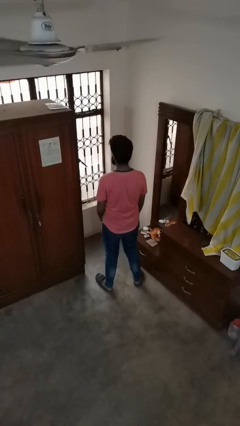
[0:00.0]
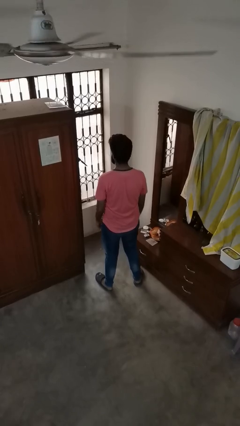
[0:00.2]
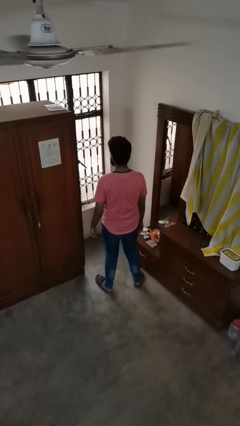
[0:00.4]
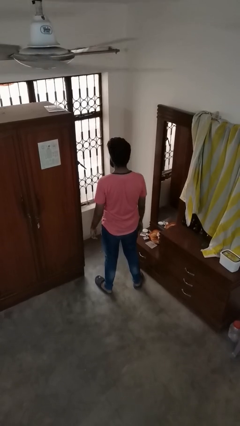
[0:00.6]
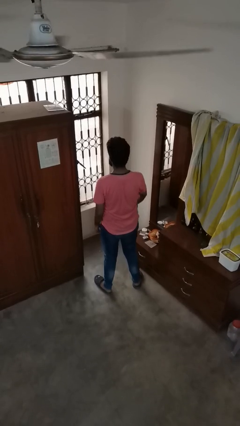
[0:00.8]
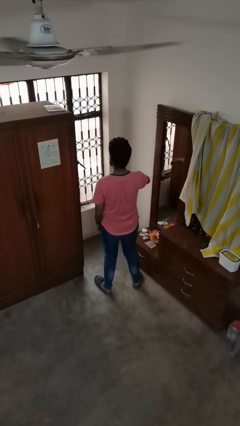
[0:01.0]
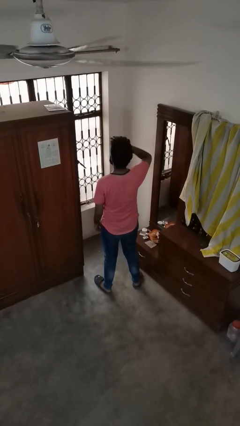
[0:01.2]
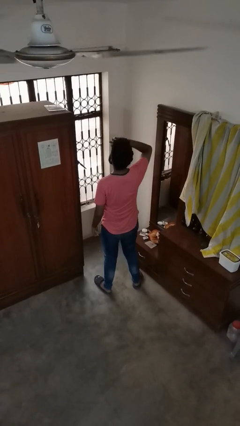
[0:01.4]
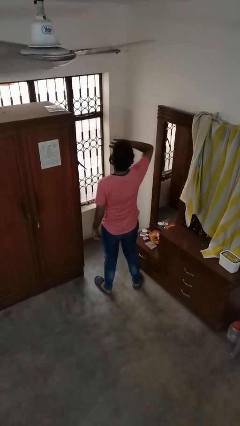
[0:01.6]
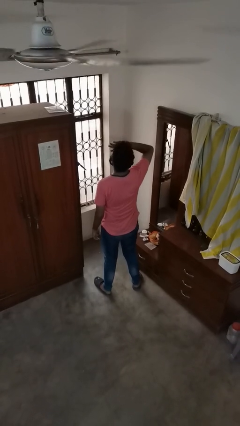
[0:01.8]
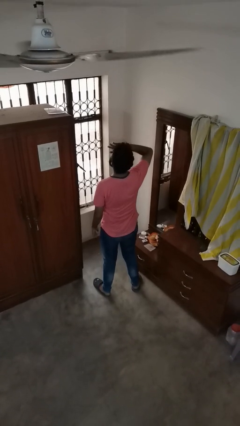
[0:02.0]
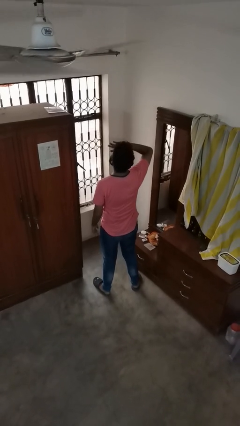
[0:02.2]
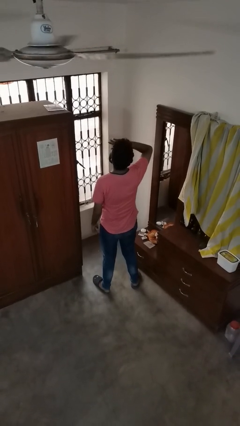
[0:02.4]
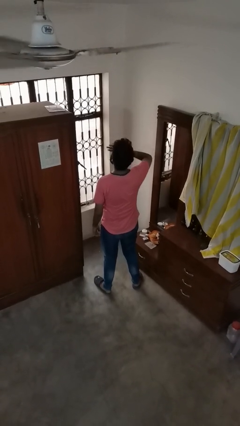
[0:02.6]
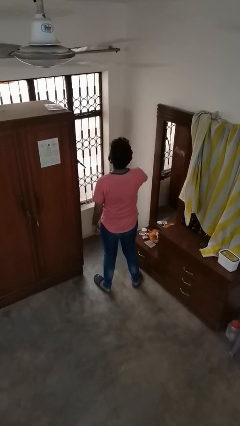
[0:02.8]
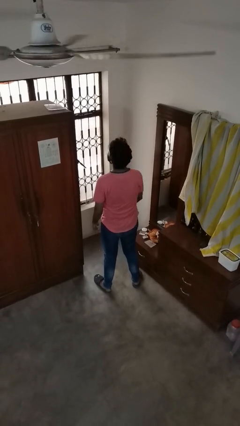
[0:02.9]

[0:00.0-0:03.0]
person yawns

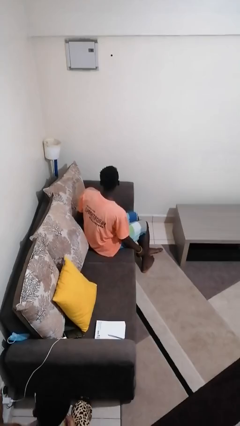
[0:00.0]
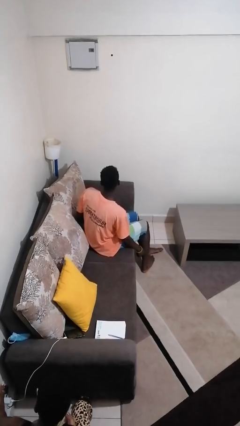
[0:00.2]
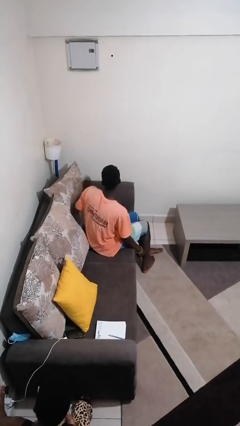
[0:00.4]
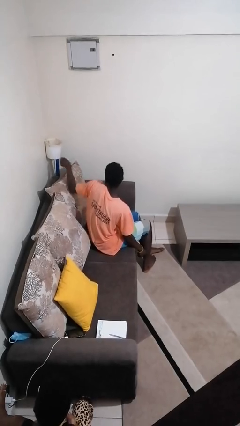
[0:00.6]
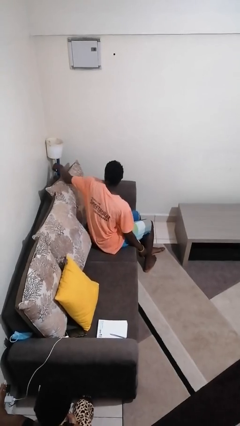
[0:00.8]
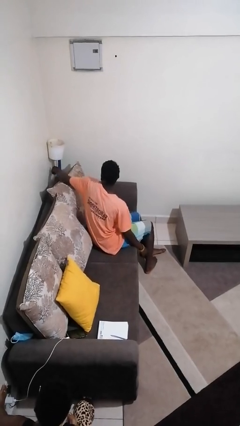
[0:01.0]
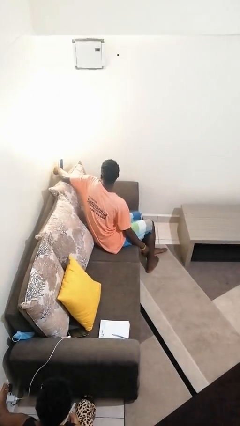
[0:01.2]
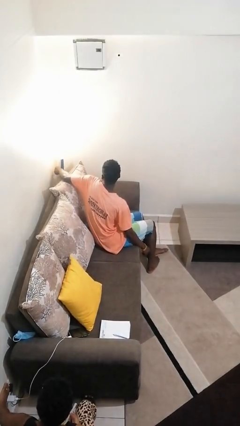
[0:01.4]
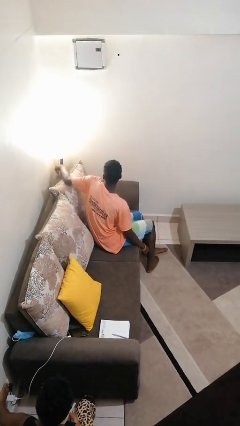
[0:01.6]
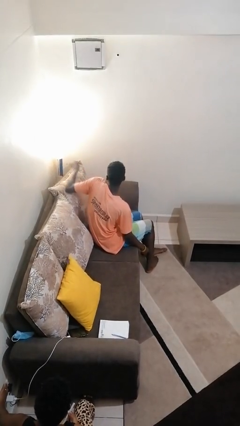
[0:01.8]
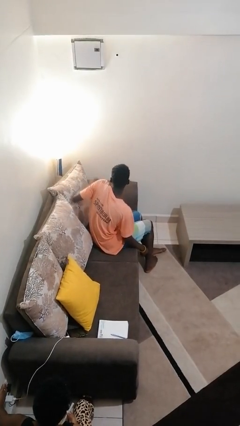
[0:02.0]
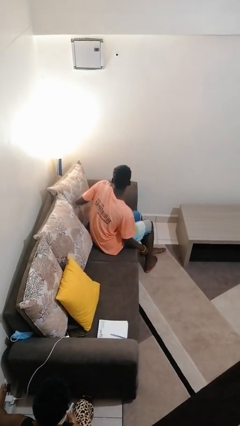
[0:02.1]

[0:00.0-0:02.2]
person turns on lamp

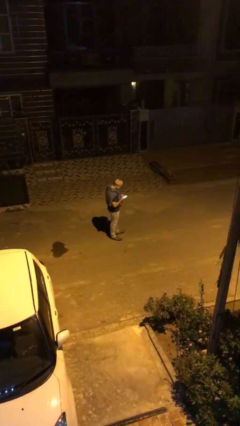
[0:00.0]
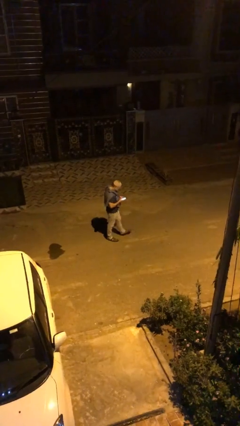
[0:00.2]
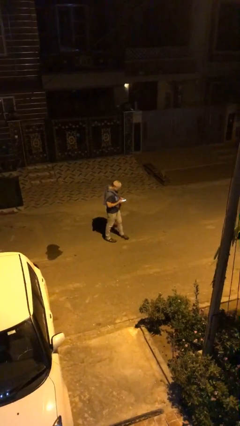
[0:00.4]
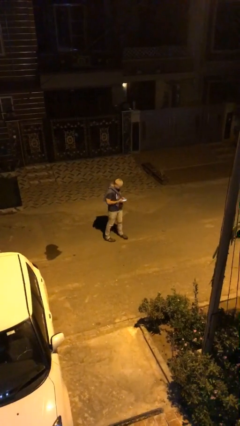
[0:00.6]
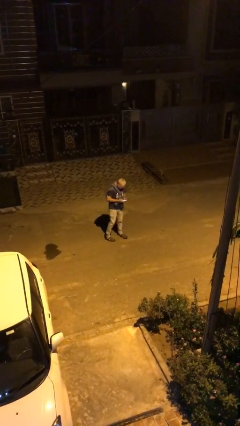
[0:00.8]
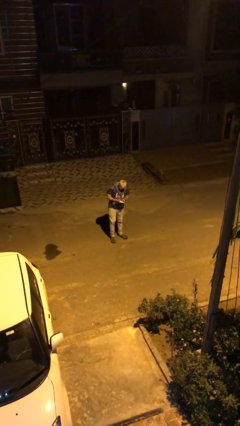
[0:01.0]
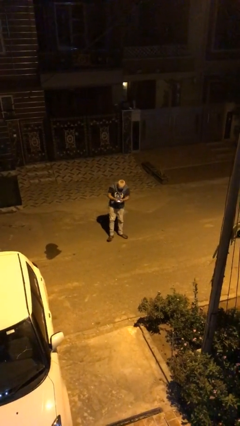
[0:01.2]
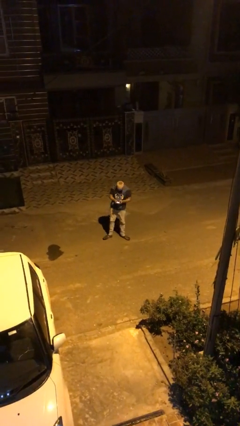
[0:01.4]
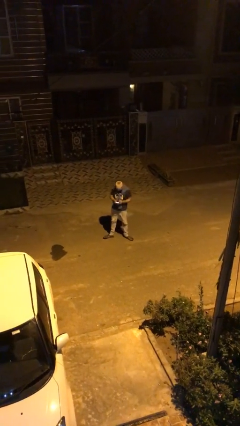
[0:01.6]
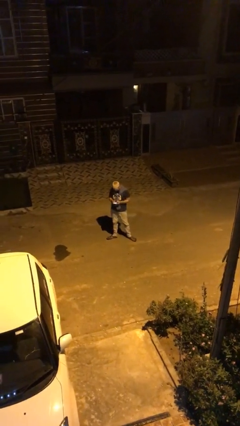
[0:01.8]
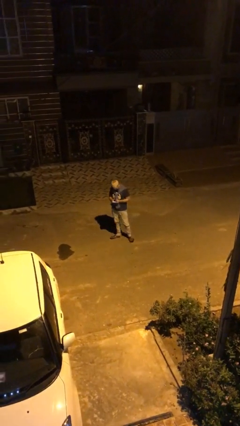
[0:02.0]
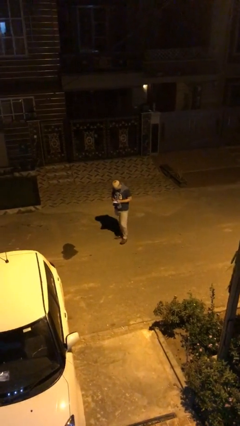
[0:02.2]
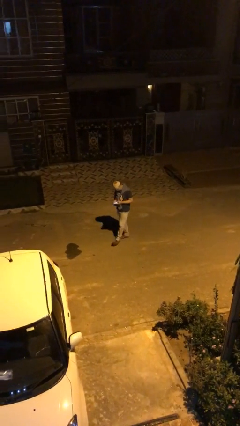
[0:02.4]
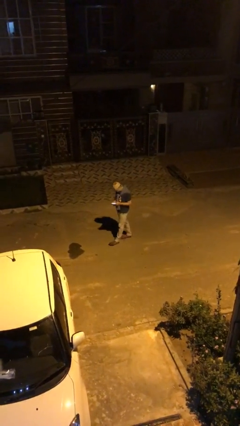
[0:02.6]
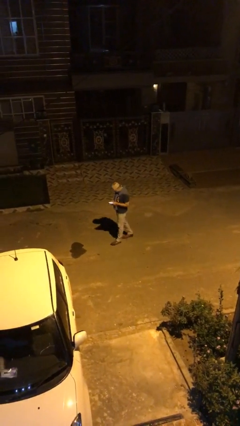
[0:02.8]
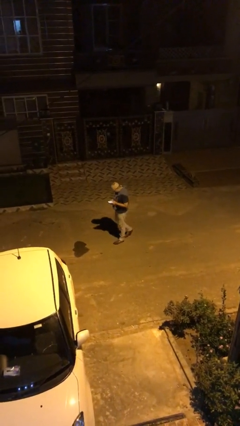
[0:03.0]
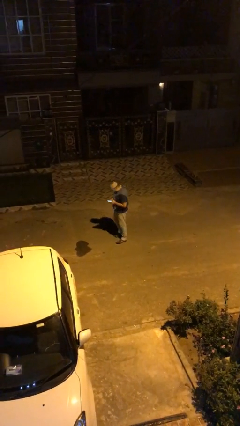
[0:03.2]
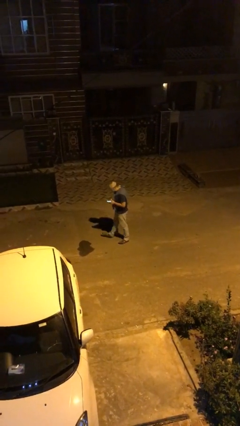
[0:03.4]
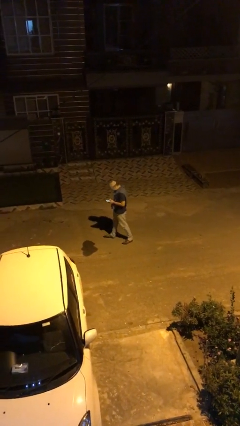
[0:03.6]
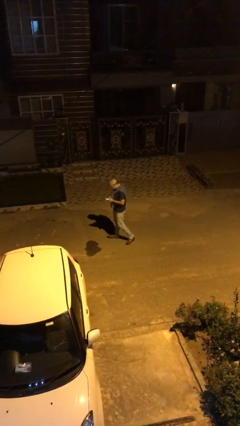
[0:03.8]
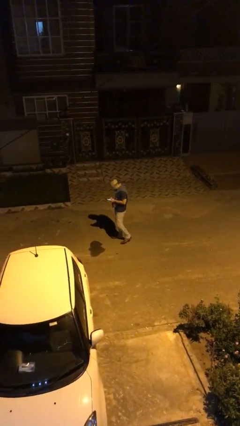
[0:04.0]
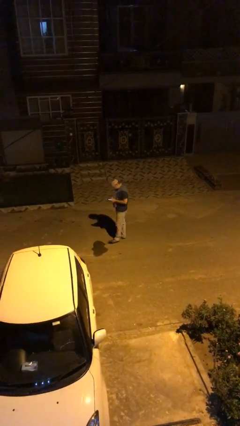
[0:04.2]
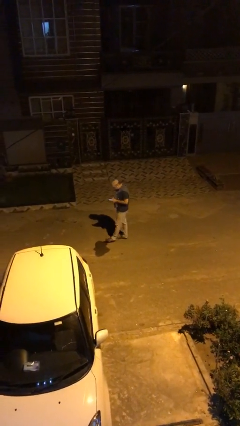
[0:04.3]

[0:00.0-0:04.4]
person texts on phone

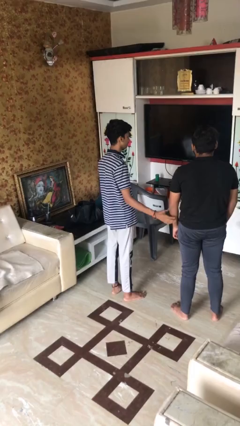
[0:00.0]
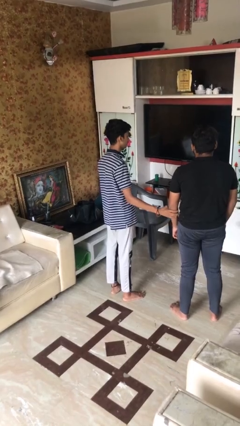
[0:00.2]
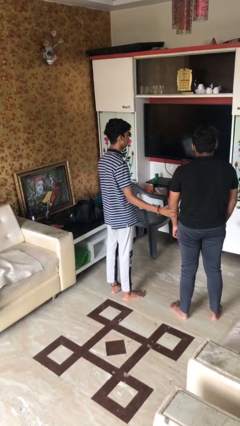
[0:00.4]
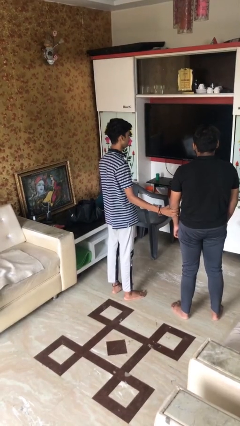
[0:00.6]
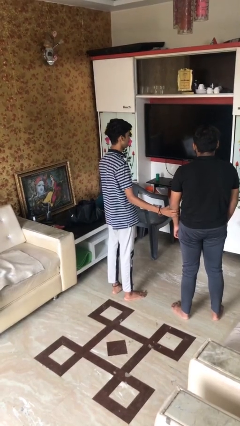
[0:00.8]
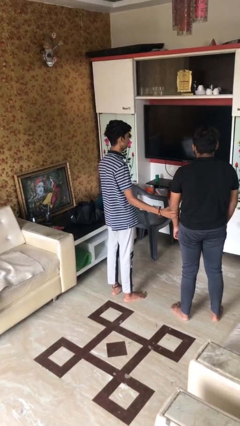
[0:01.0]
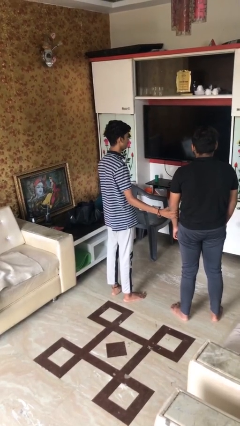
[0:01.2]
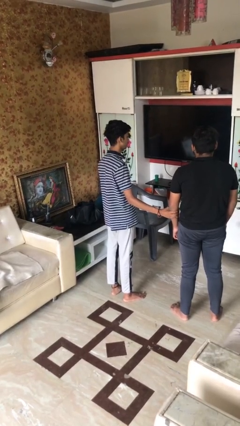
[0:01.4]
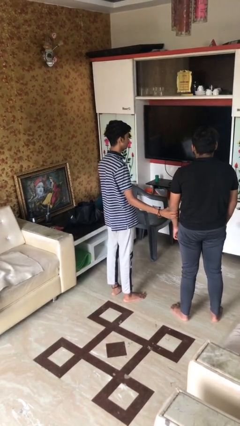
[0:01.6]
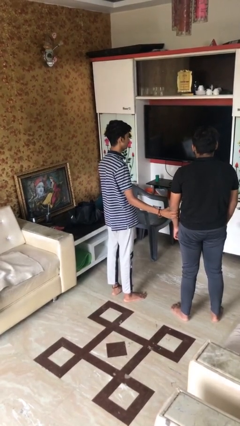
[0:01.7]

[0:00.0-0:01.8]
person grabs person by forearm

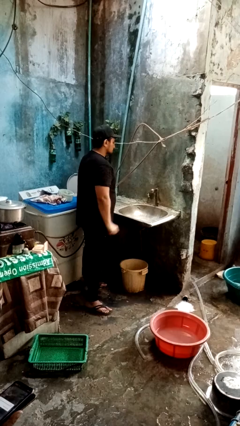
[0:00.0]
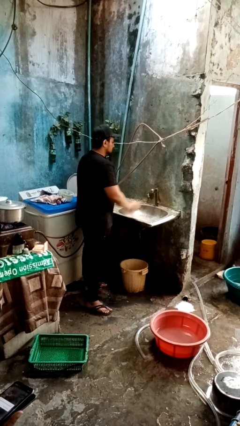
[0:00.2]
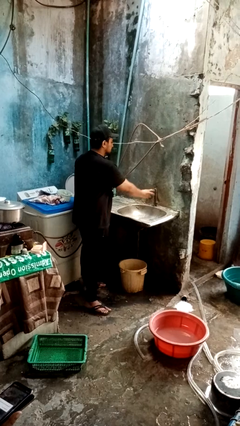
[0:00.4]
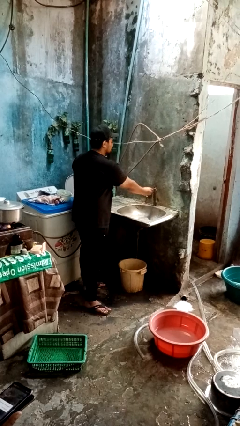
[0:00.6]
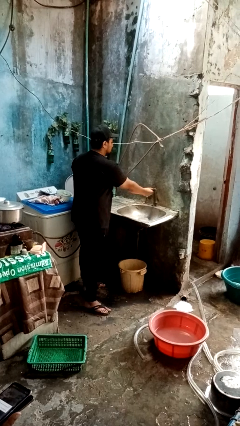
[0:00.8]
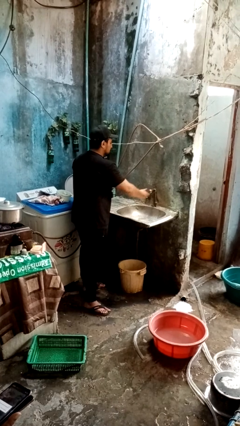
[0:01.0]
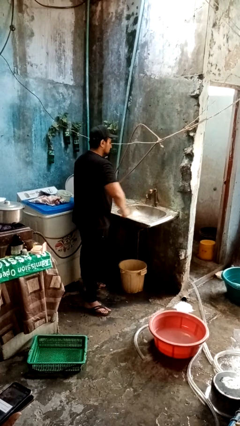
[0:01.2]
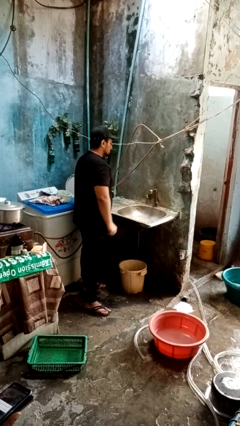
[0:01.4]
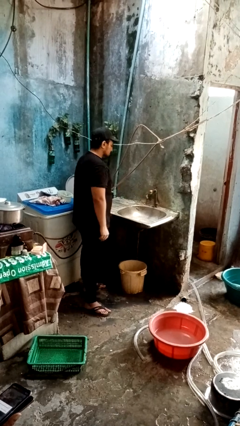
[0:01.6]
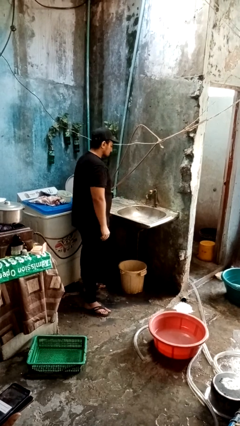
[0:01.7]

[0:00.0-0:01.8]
person turns off faucet

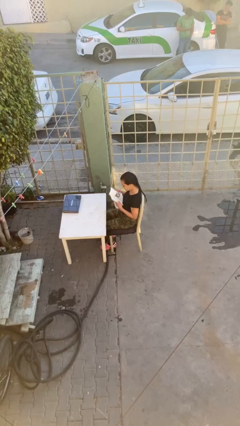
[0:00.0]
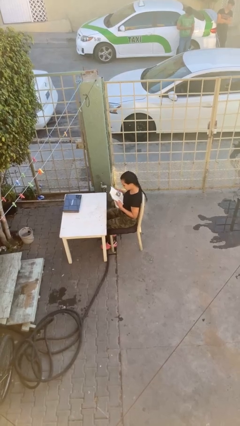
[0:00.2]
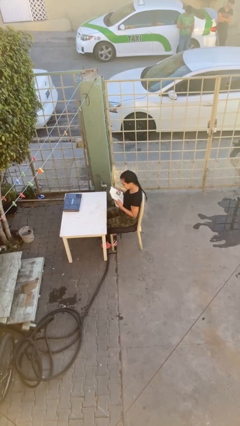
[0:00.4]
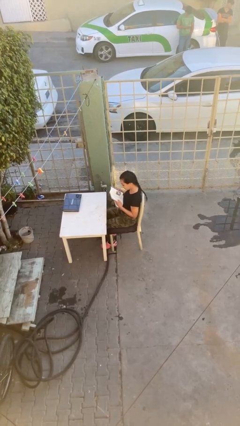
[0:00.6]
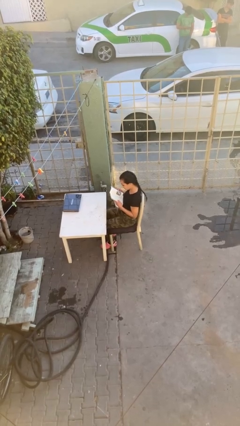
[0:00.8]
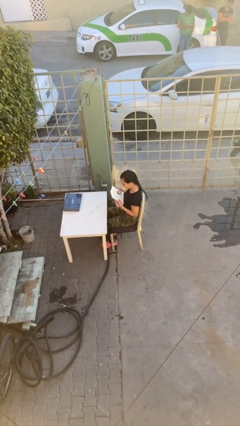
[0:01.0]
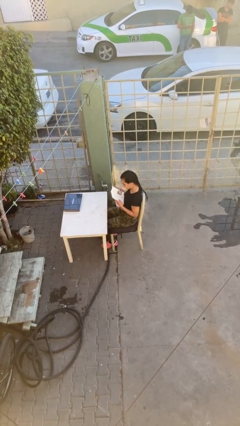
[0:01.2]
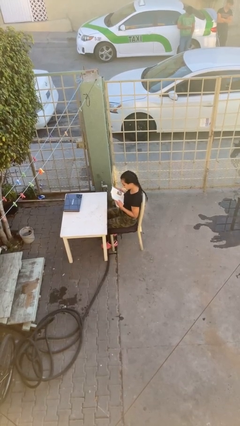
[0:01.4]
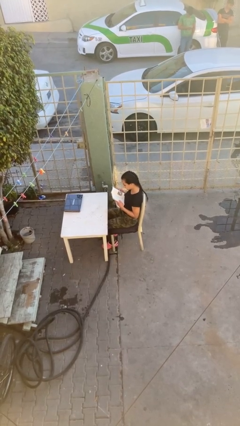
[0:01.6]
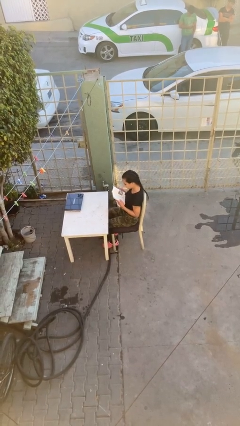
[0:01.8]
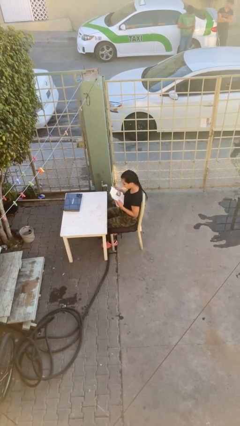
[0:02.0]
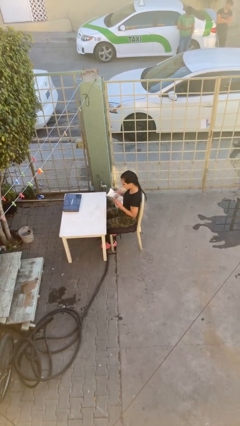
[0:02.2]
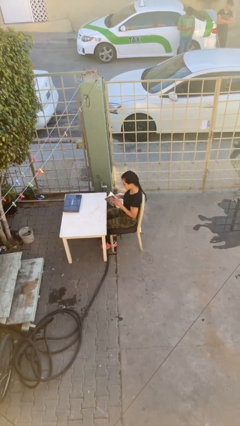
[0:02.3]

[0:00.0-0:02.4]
person reads document

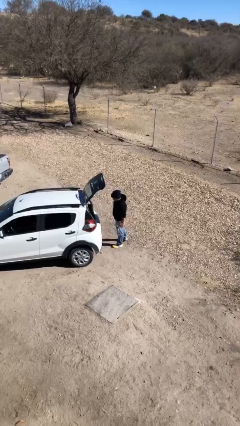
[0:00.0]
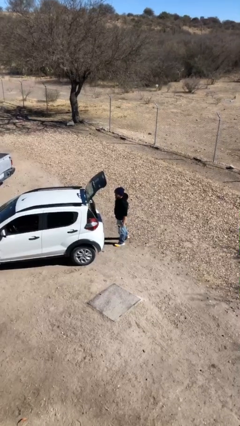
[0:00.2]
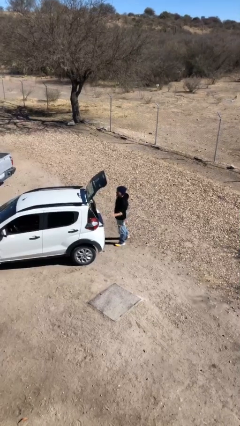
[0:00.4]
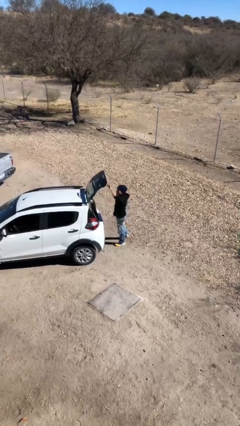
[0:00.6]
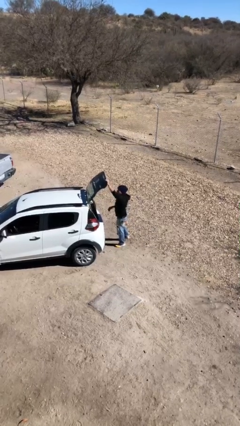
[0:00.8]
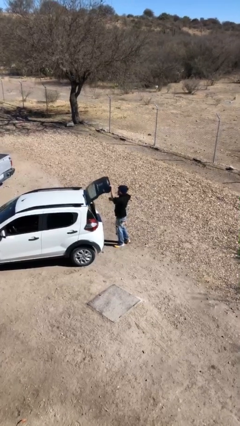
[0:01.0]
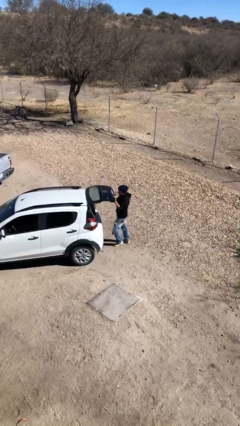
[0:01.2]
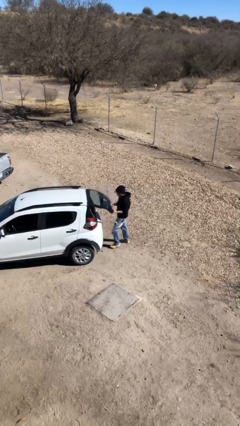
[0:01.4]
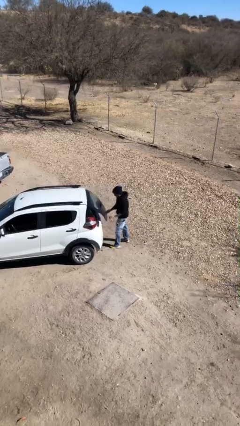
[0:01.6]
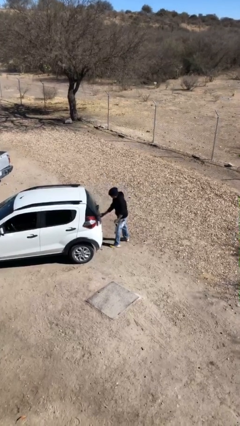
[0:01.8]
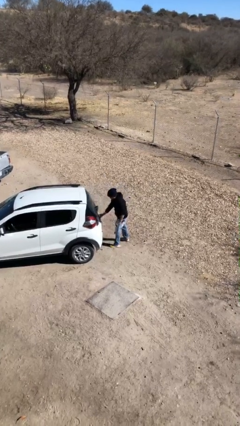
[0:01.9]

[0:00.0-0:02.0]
person closes car trunk
